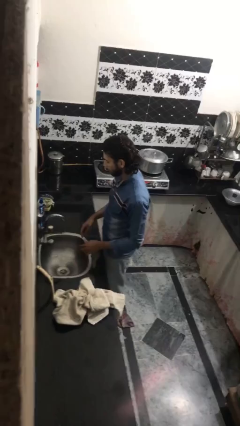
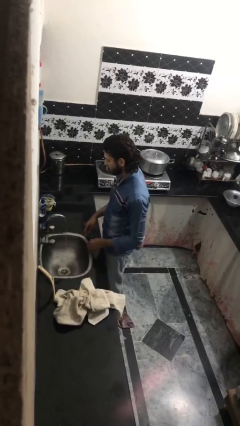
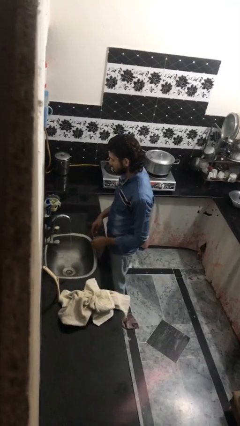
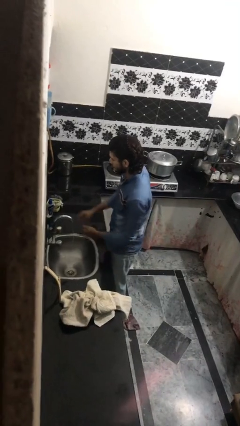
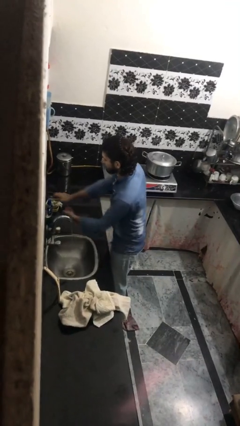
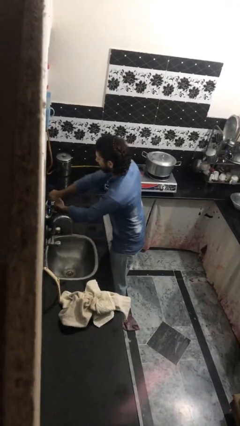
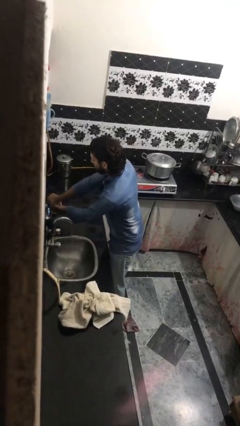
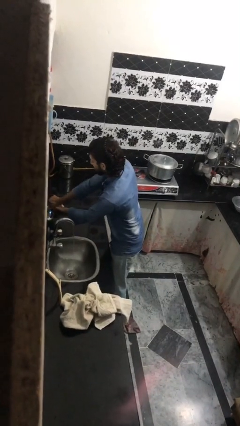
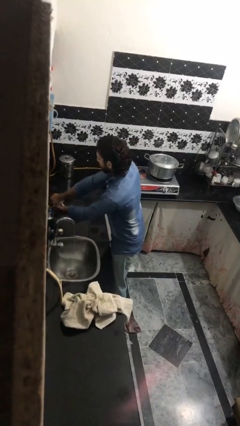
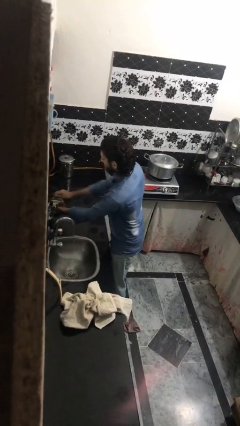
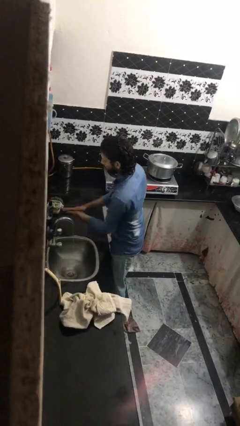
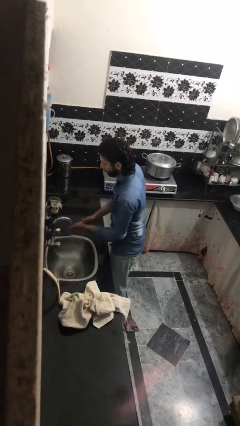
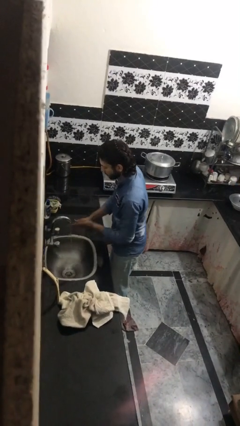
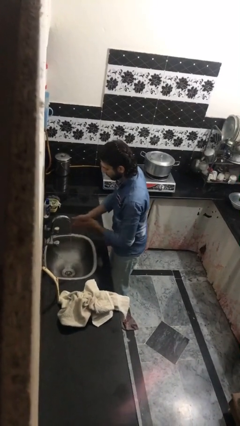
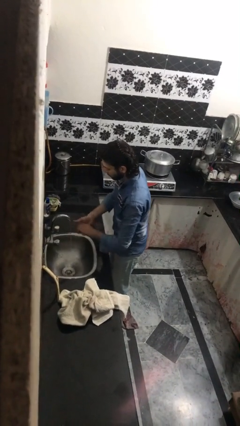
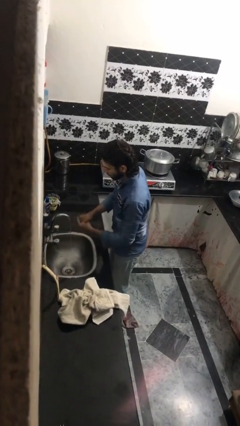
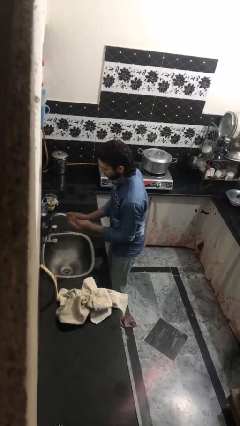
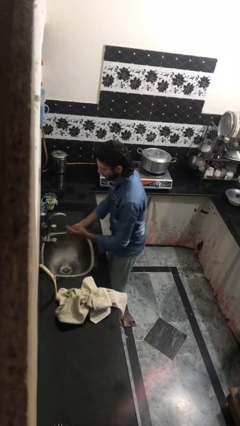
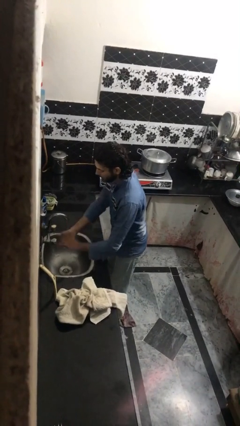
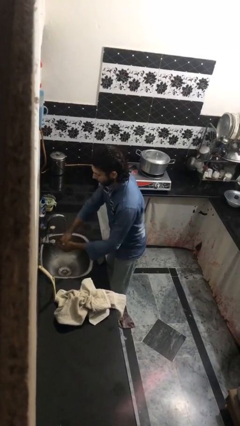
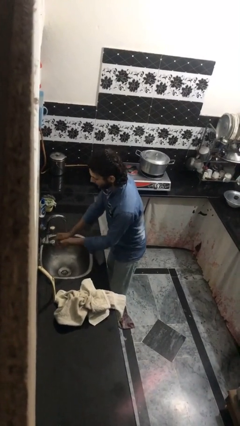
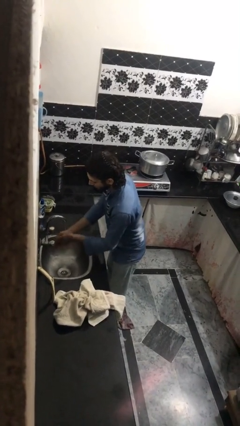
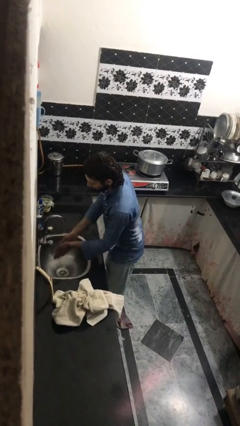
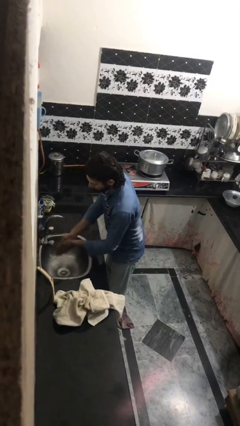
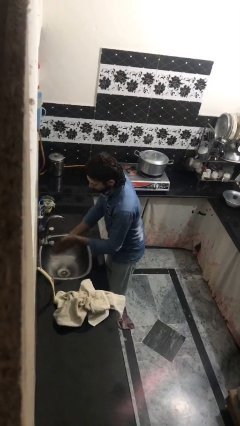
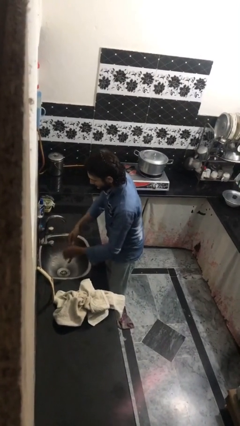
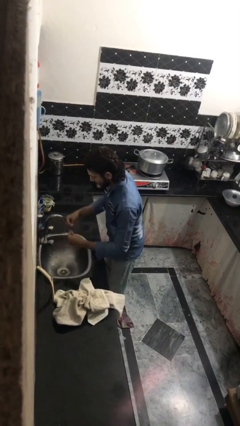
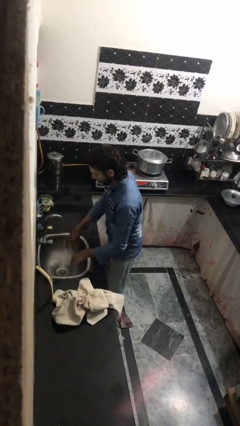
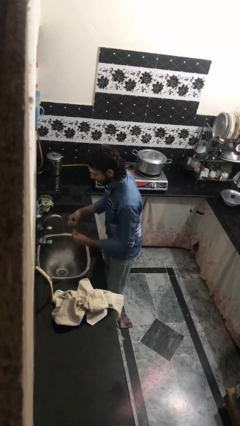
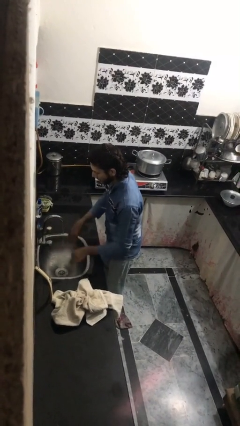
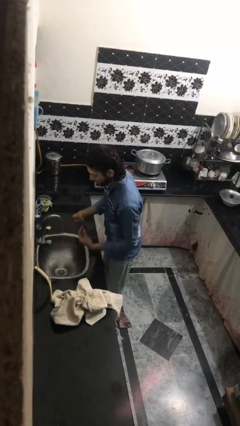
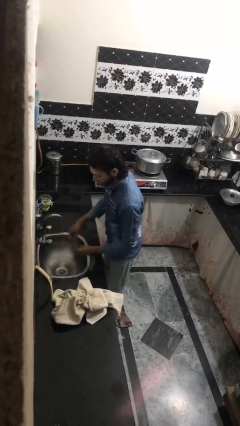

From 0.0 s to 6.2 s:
person washes hands

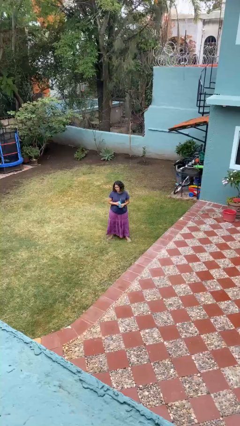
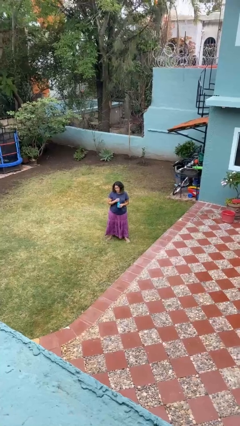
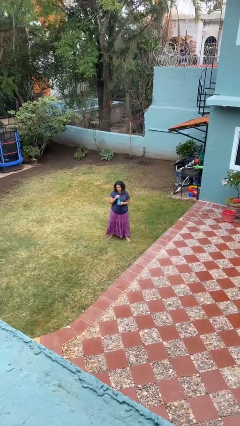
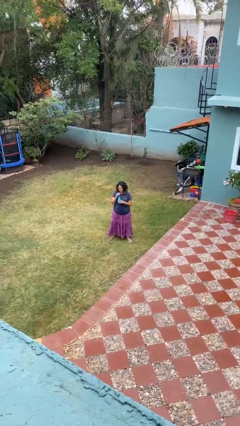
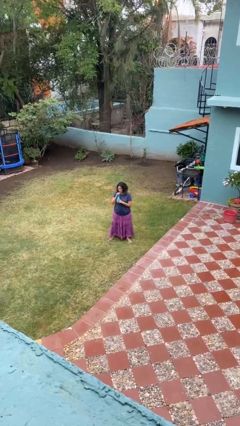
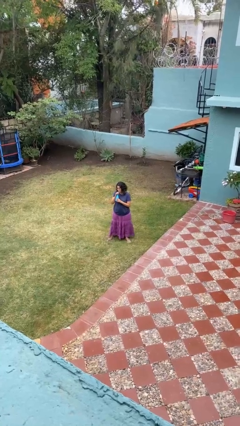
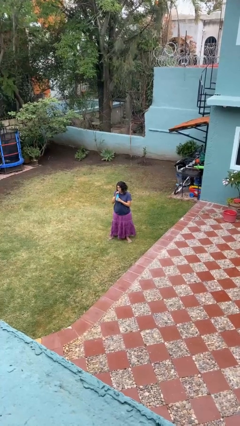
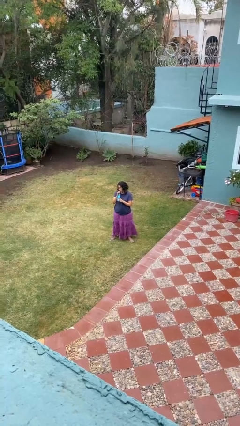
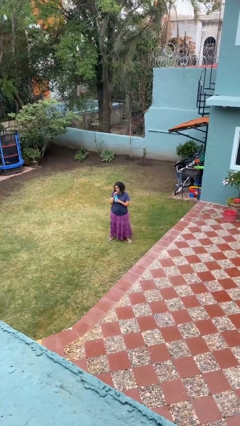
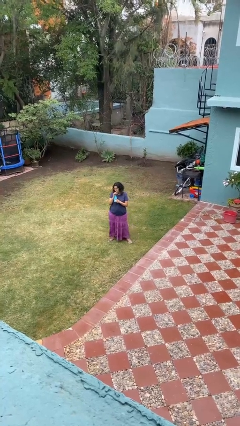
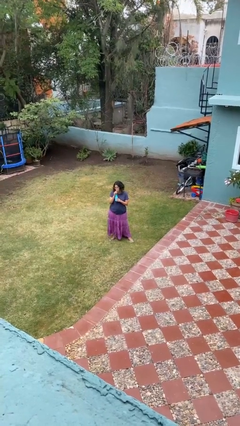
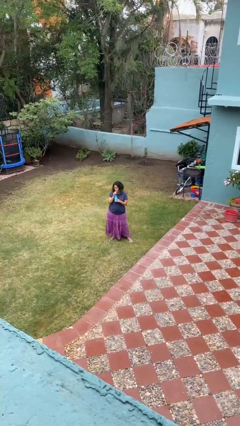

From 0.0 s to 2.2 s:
person drinks from straw

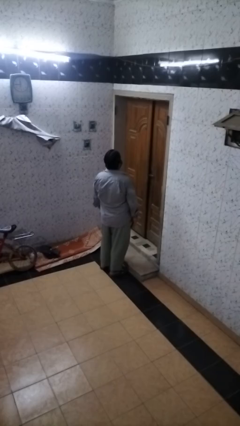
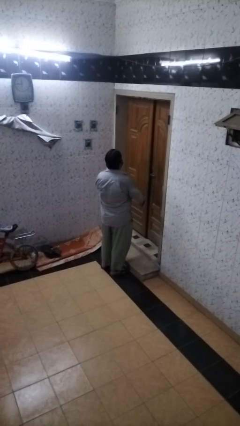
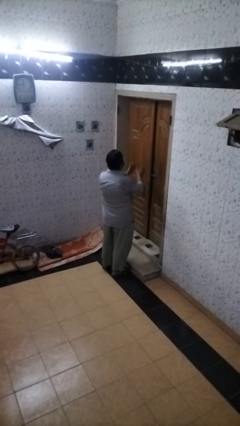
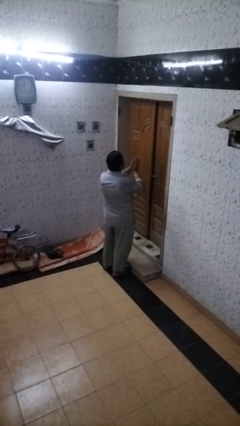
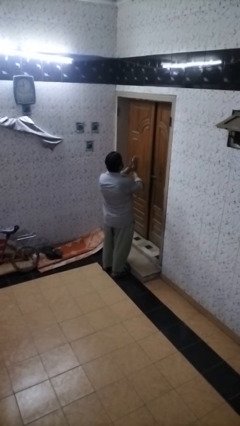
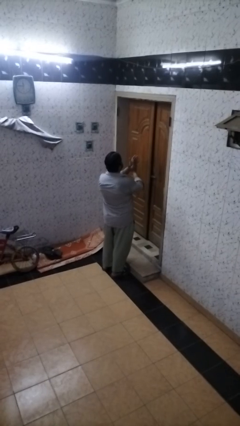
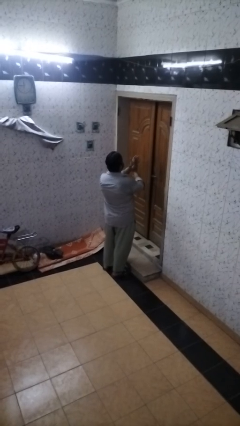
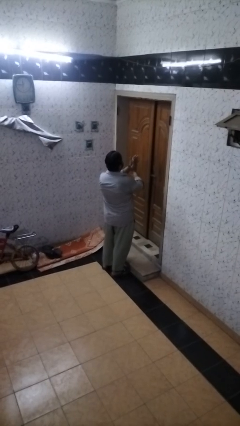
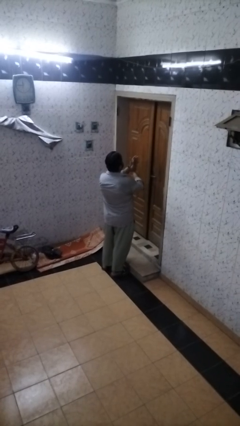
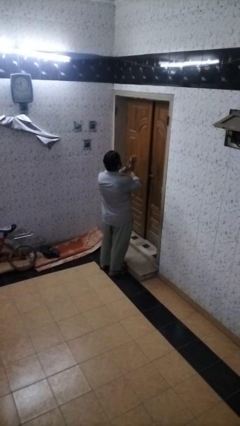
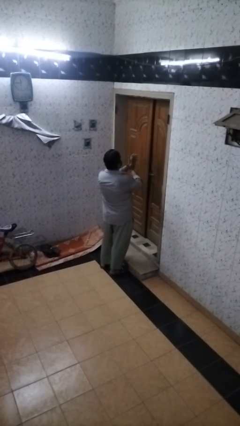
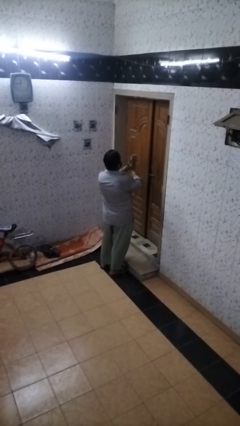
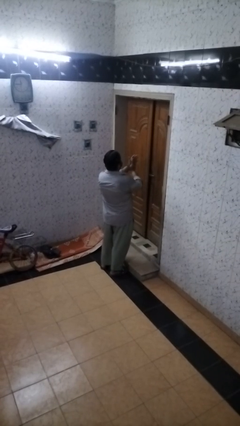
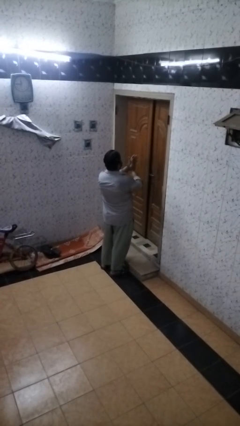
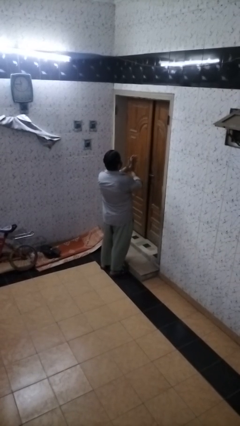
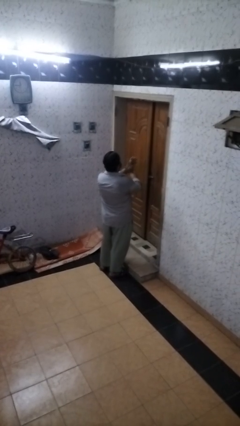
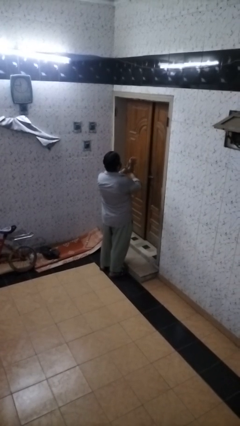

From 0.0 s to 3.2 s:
person claps hands

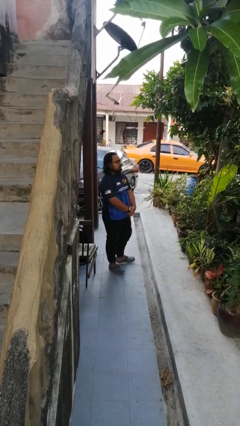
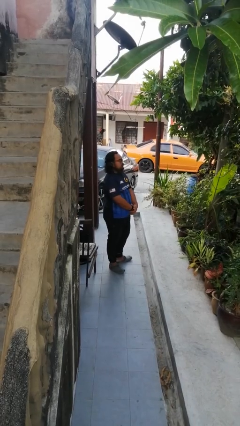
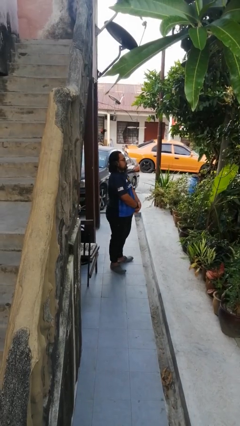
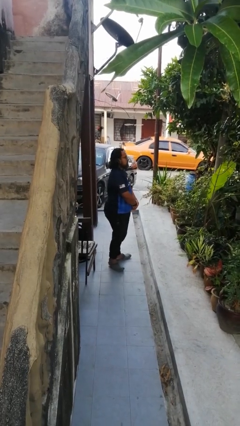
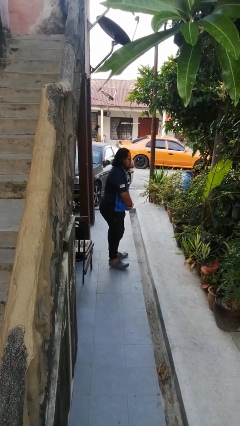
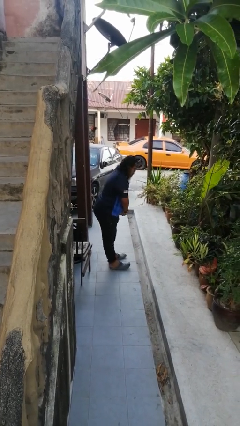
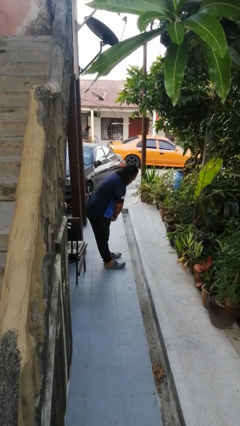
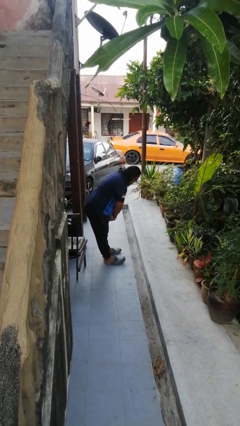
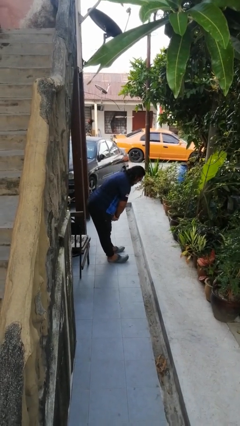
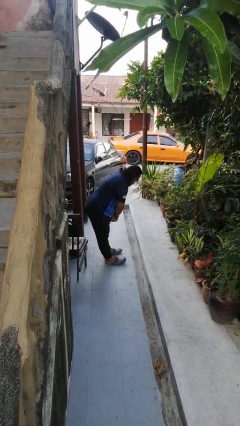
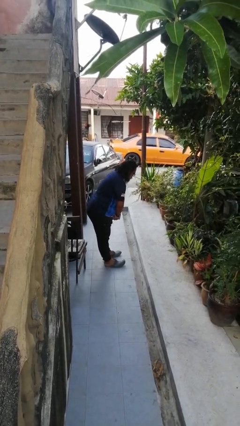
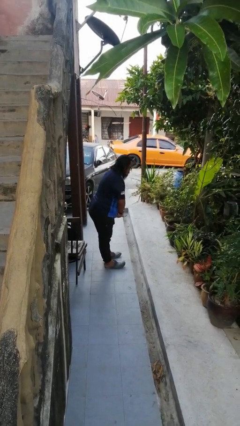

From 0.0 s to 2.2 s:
person bows

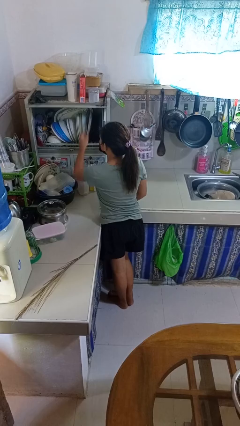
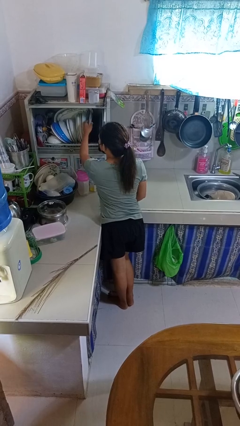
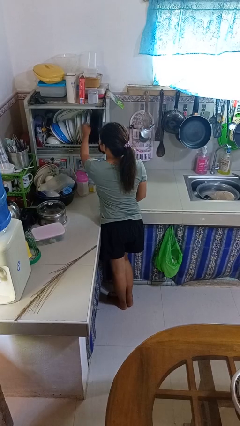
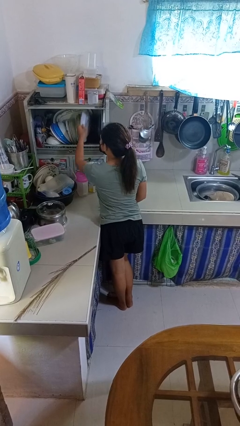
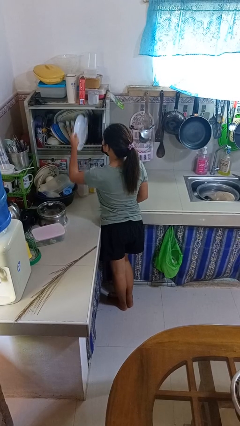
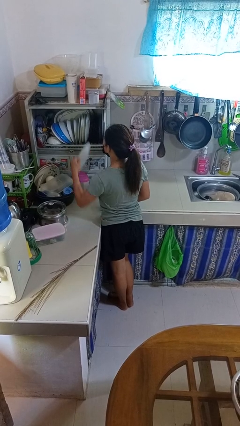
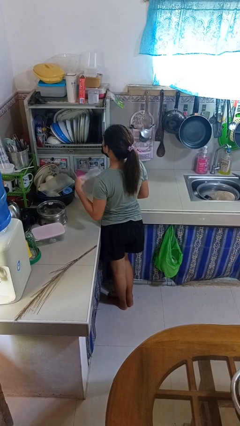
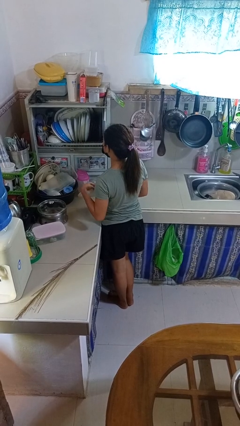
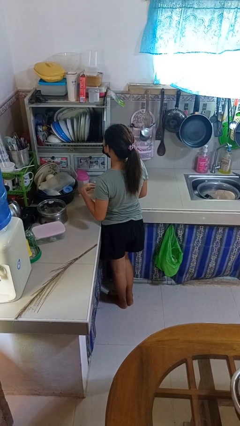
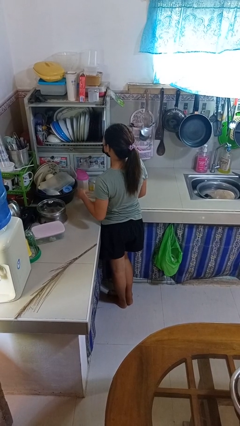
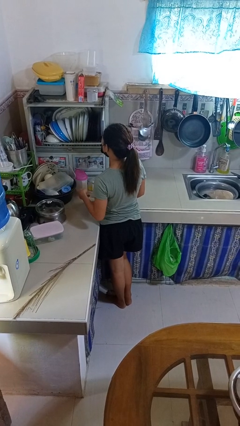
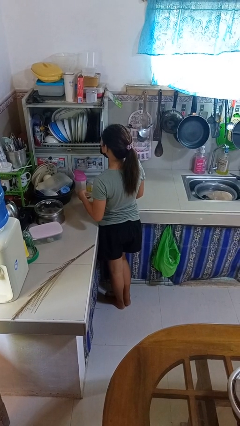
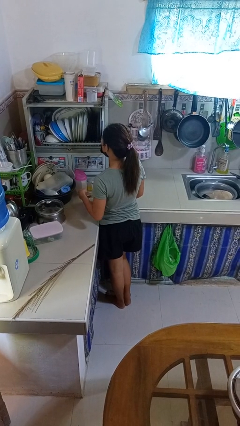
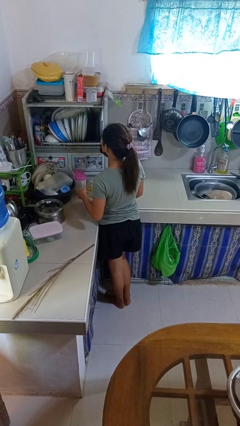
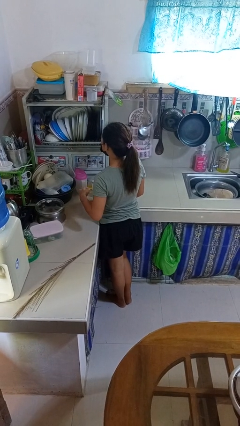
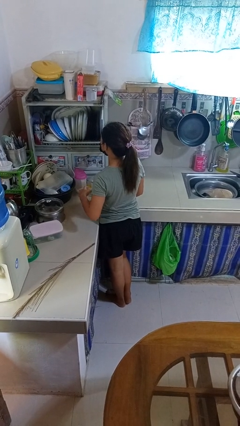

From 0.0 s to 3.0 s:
person takes object from kitchen drawer

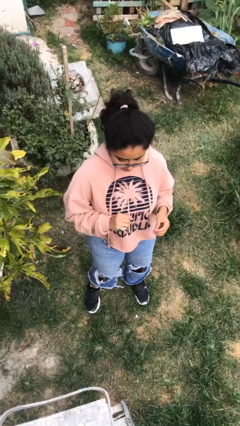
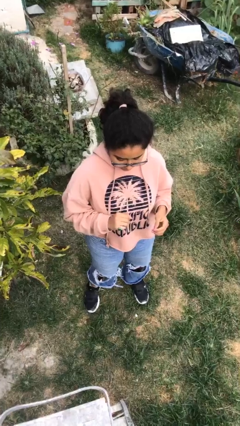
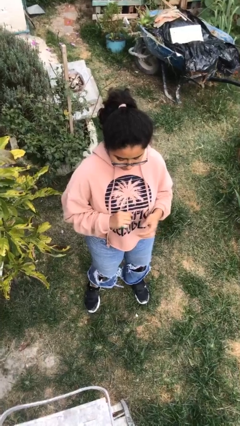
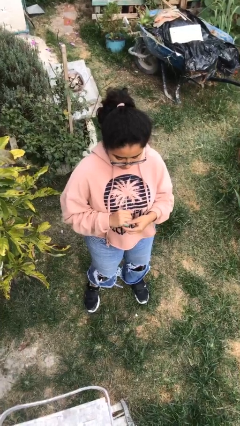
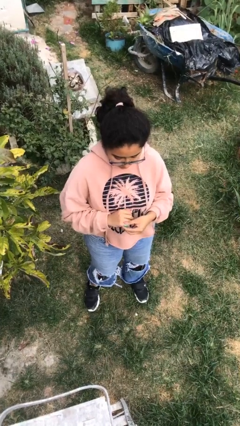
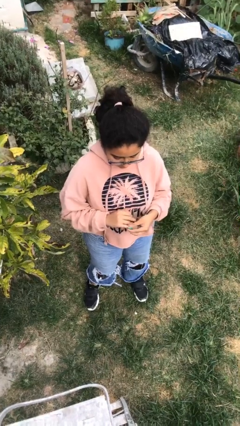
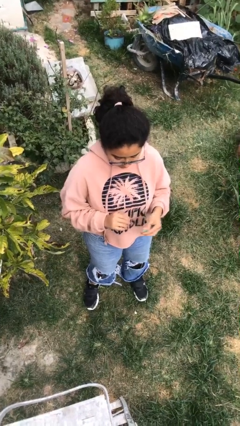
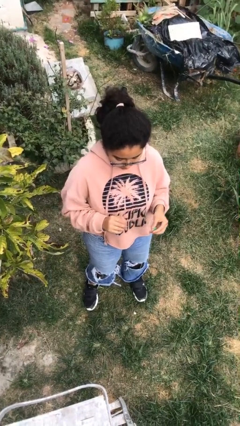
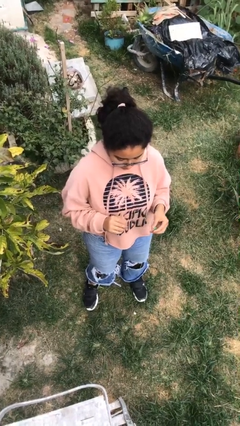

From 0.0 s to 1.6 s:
person takes off ring
